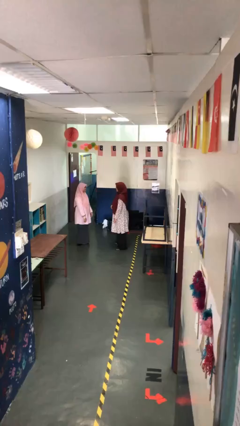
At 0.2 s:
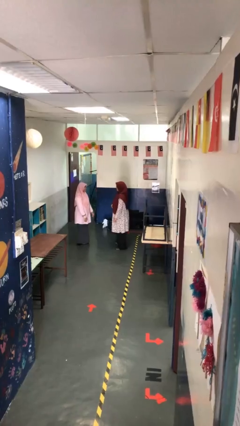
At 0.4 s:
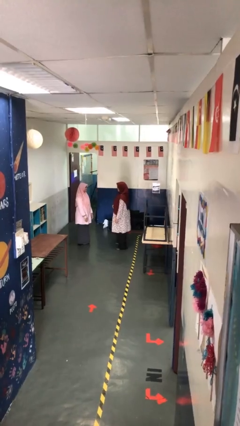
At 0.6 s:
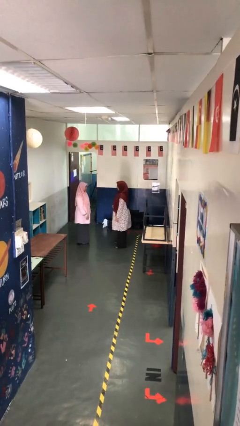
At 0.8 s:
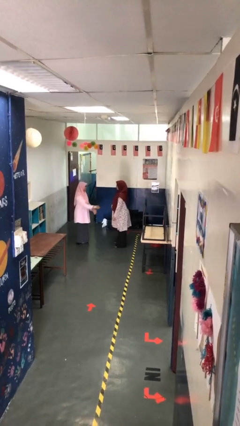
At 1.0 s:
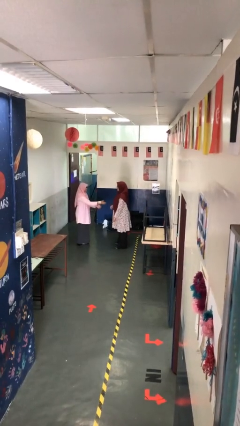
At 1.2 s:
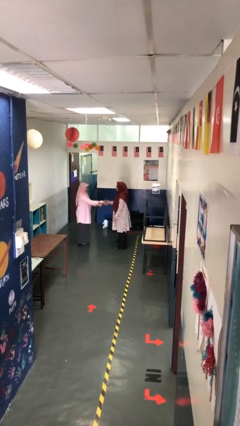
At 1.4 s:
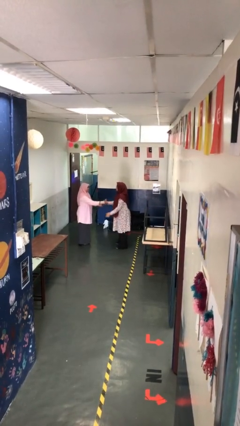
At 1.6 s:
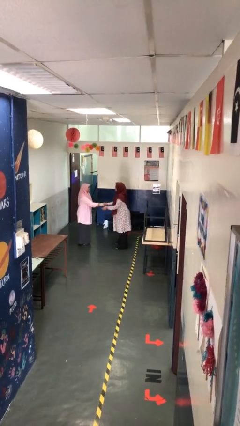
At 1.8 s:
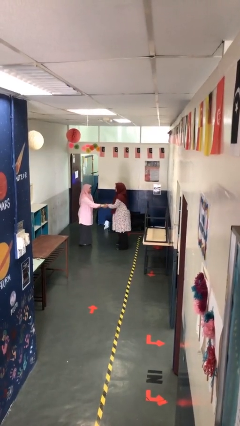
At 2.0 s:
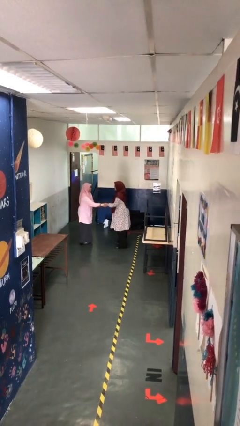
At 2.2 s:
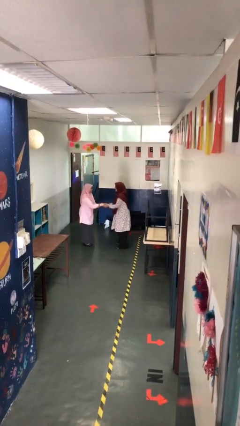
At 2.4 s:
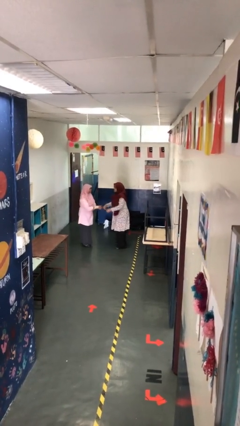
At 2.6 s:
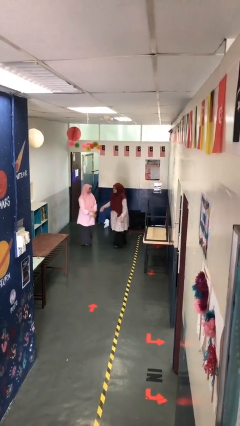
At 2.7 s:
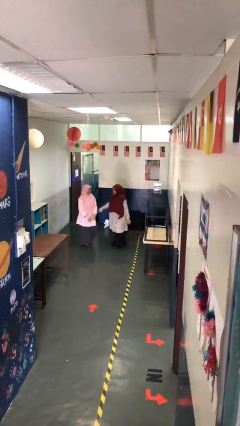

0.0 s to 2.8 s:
person shakes hand

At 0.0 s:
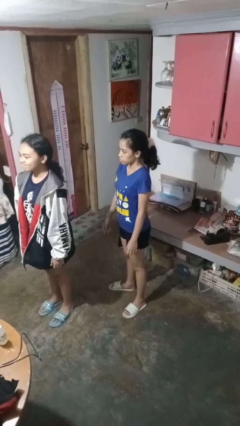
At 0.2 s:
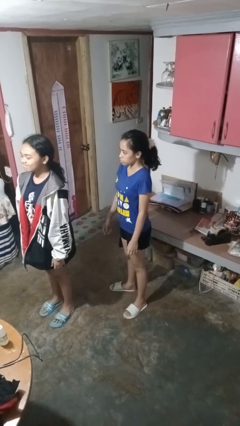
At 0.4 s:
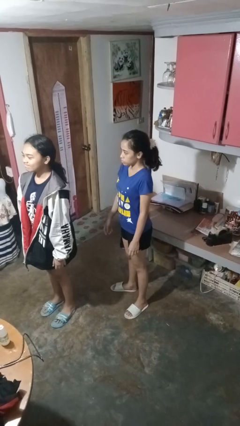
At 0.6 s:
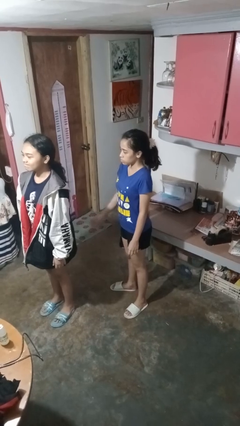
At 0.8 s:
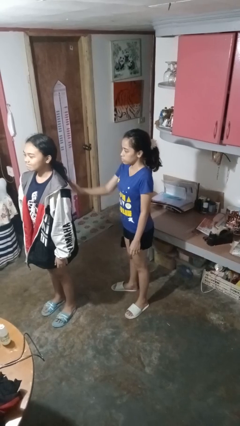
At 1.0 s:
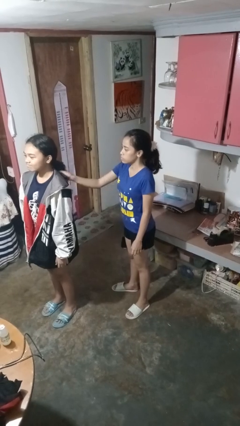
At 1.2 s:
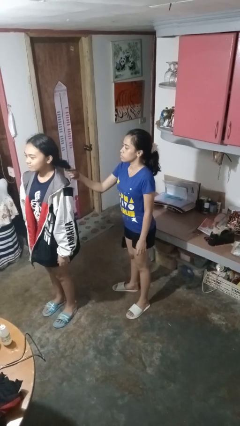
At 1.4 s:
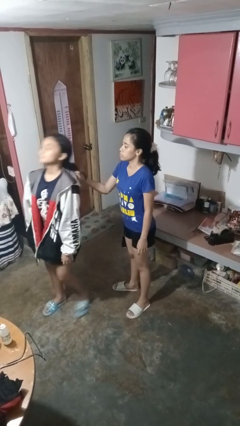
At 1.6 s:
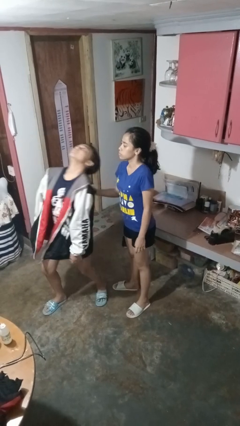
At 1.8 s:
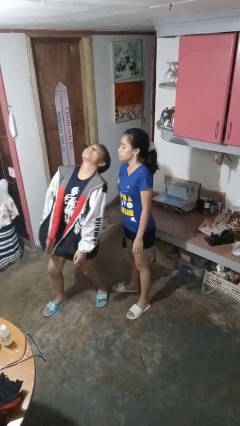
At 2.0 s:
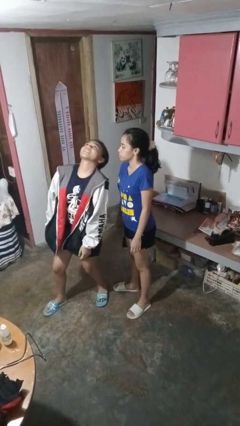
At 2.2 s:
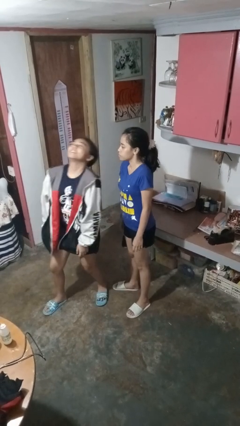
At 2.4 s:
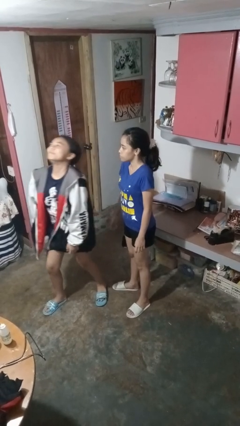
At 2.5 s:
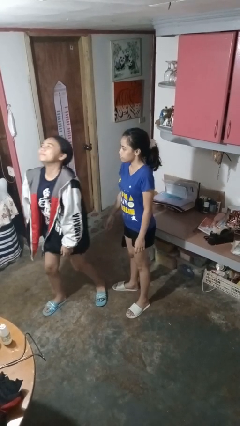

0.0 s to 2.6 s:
person grabs person by hair

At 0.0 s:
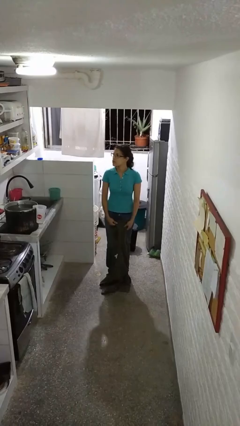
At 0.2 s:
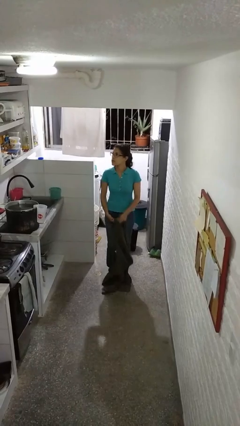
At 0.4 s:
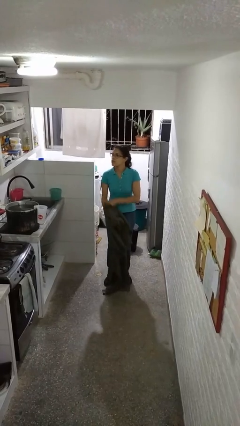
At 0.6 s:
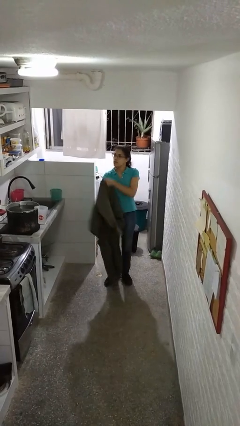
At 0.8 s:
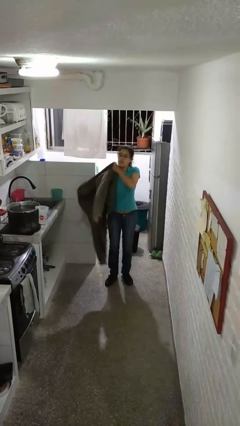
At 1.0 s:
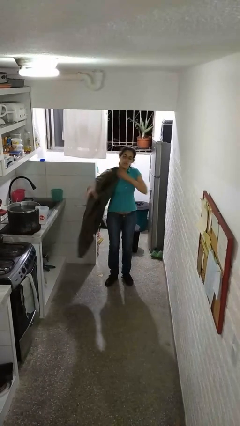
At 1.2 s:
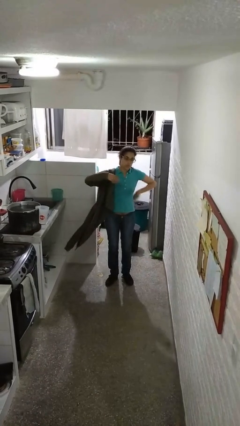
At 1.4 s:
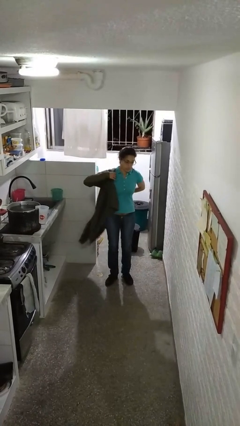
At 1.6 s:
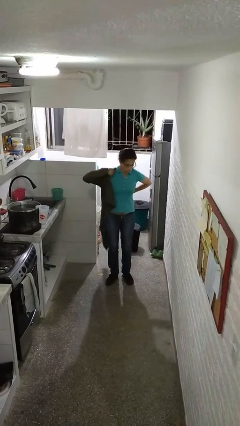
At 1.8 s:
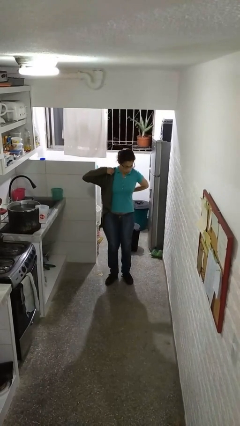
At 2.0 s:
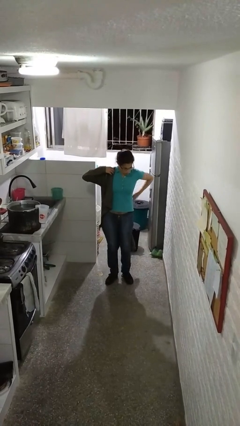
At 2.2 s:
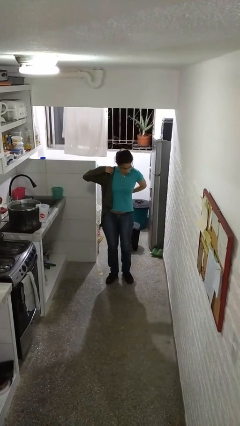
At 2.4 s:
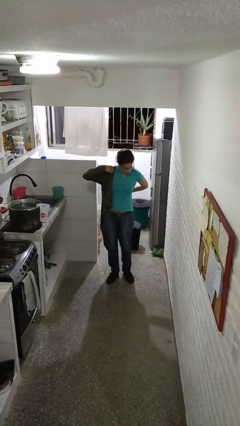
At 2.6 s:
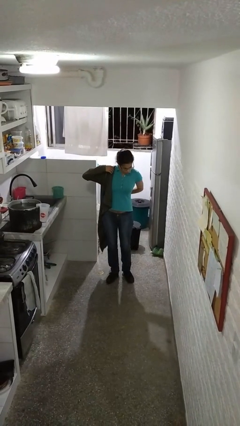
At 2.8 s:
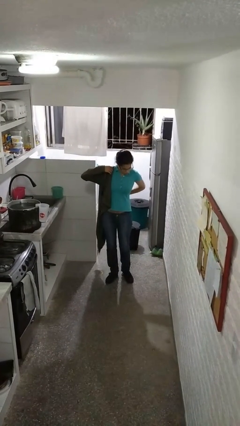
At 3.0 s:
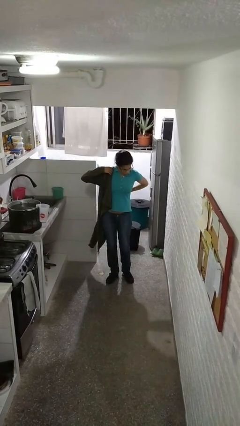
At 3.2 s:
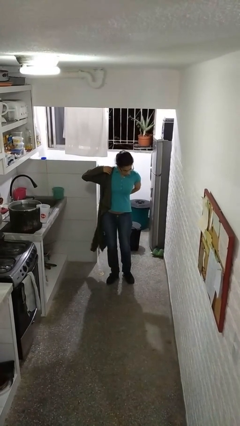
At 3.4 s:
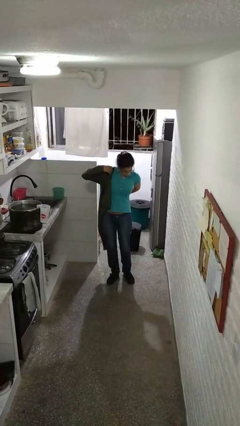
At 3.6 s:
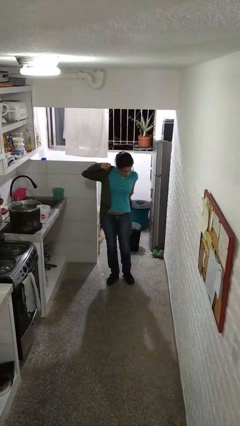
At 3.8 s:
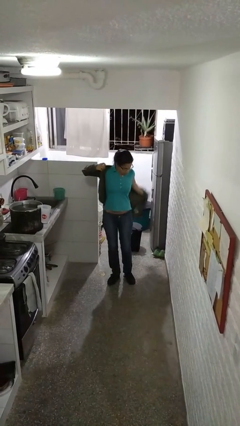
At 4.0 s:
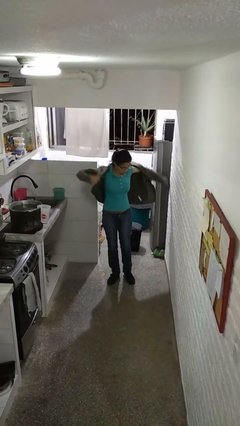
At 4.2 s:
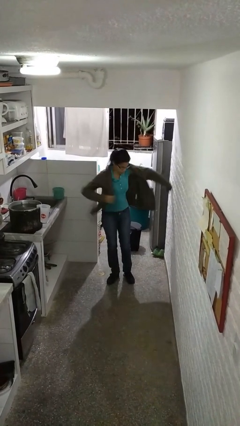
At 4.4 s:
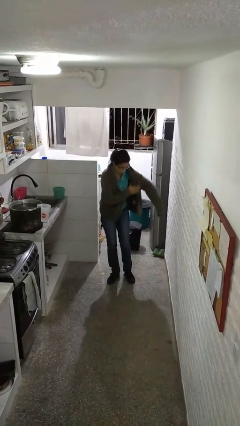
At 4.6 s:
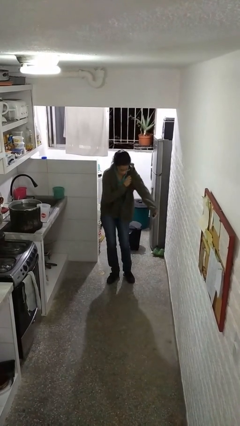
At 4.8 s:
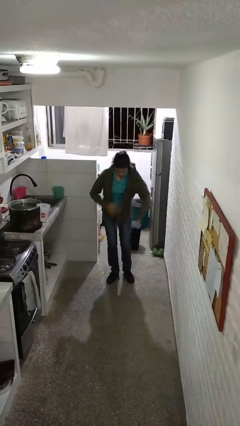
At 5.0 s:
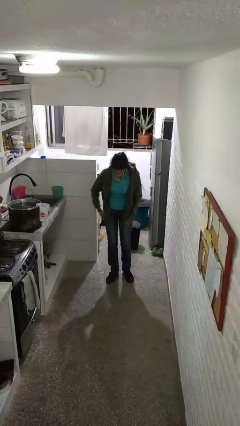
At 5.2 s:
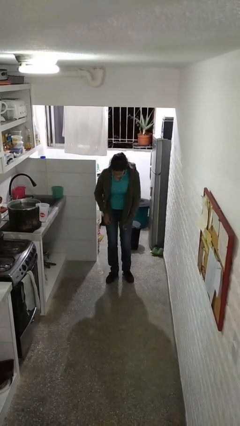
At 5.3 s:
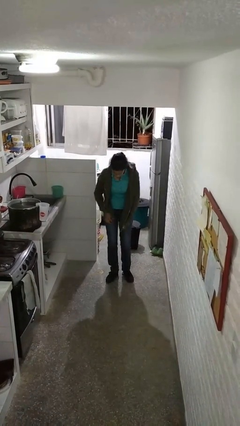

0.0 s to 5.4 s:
person puts on jacket

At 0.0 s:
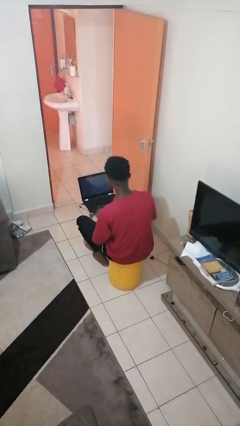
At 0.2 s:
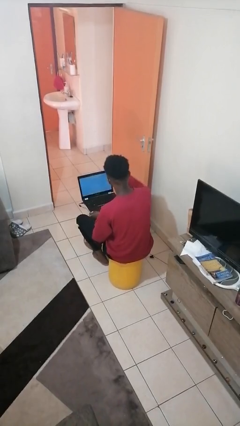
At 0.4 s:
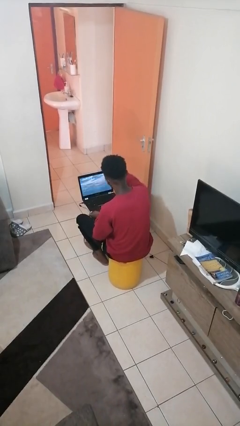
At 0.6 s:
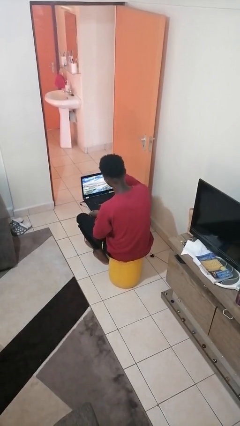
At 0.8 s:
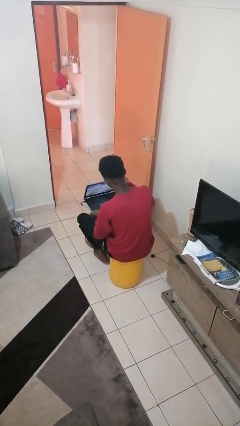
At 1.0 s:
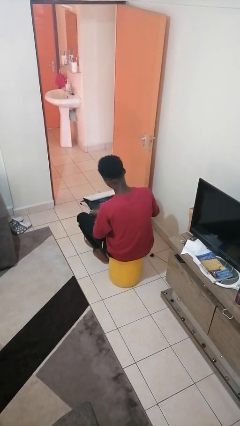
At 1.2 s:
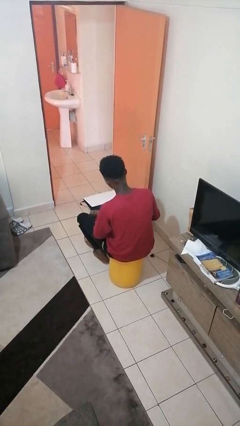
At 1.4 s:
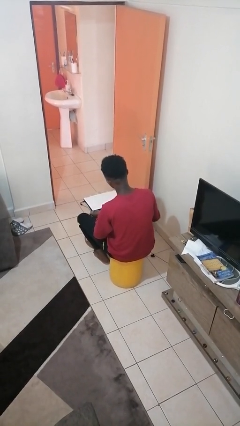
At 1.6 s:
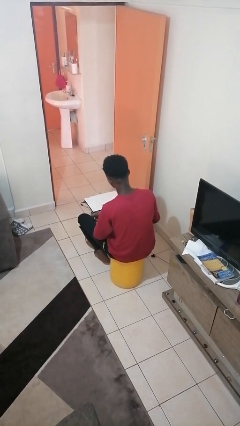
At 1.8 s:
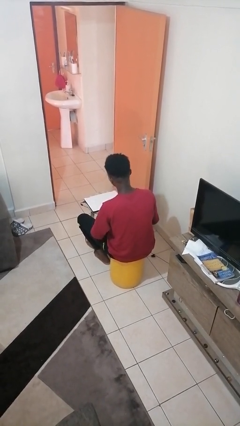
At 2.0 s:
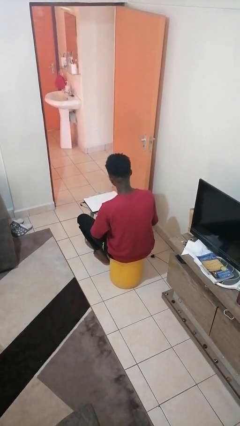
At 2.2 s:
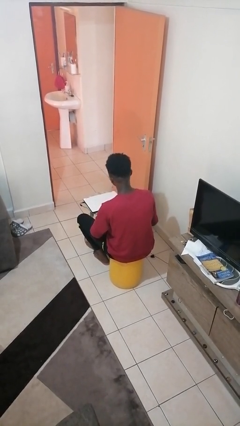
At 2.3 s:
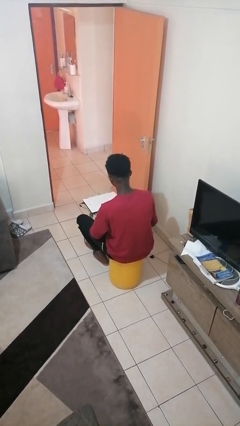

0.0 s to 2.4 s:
person closes laptop

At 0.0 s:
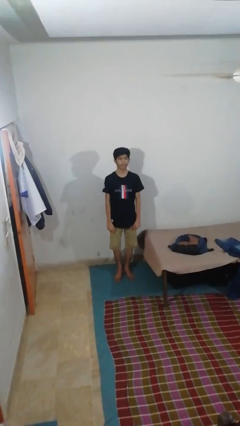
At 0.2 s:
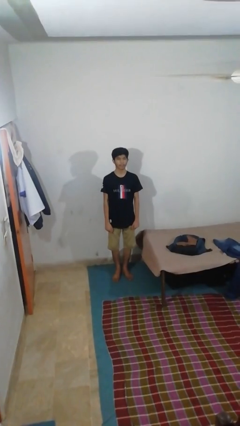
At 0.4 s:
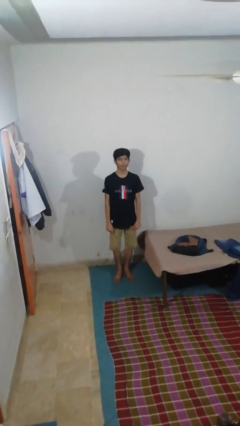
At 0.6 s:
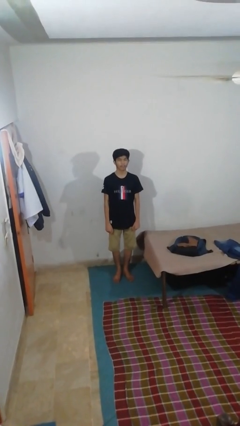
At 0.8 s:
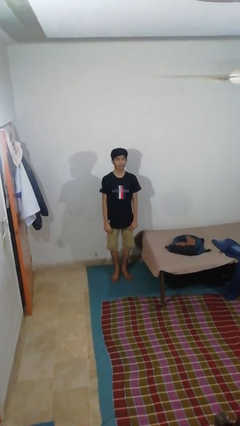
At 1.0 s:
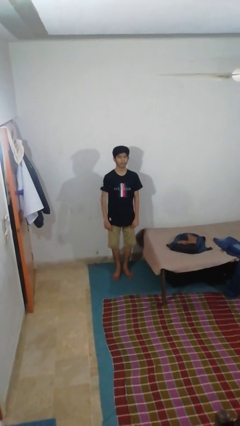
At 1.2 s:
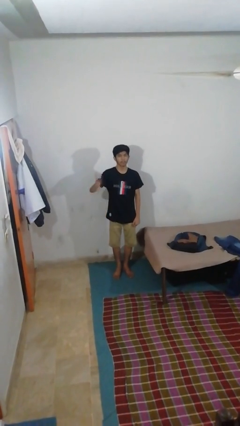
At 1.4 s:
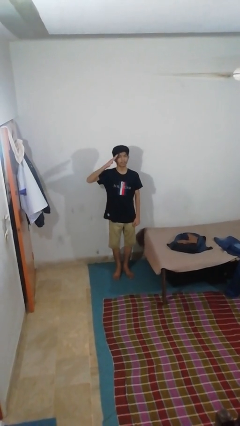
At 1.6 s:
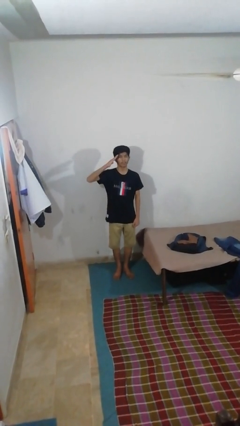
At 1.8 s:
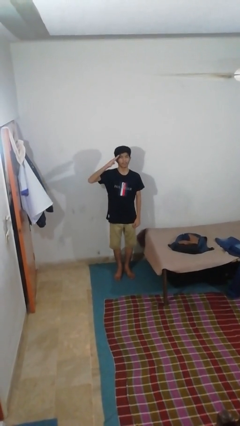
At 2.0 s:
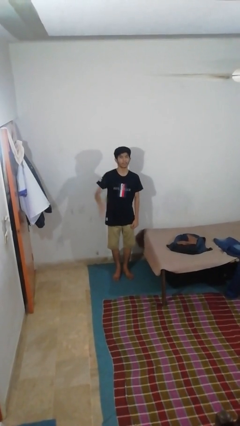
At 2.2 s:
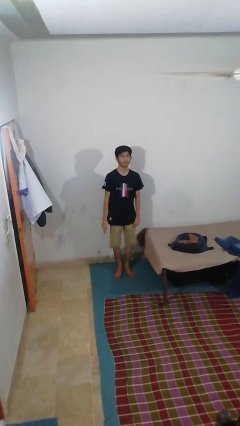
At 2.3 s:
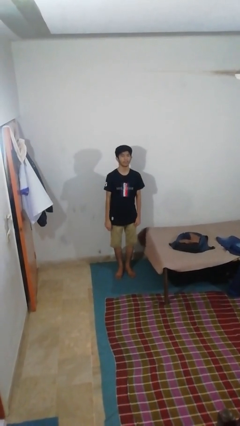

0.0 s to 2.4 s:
person salutes

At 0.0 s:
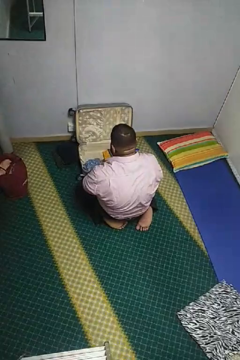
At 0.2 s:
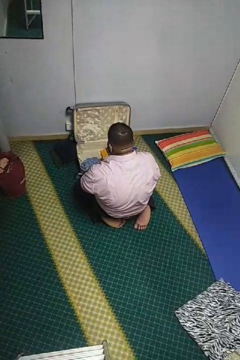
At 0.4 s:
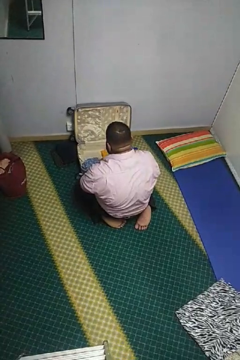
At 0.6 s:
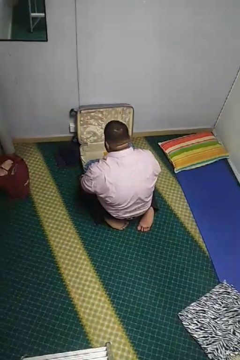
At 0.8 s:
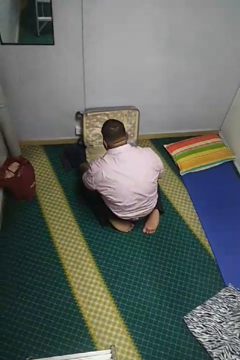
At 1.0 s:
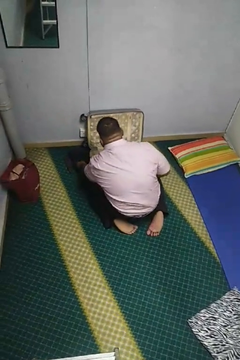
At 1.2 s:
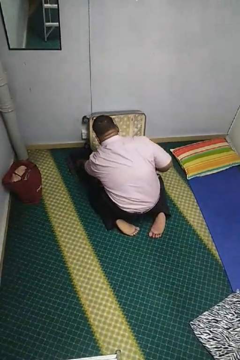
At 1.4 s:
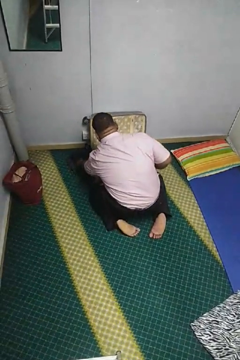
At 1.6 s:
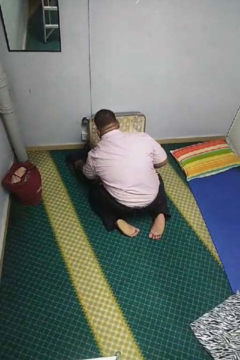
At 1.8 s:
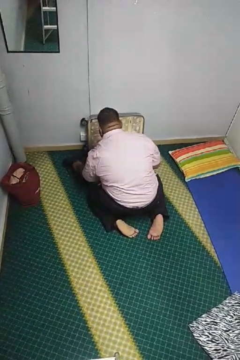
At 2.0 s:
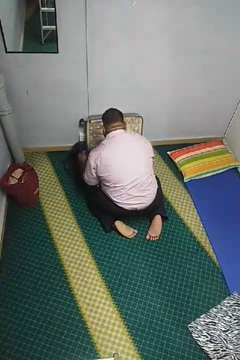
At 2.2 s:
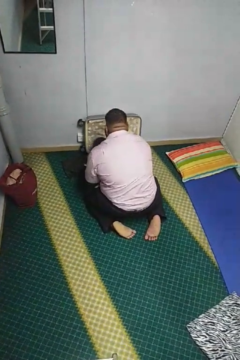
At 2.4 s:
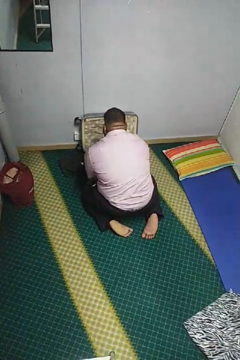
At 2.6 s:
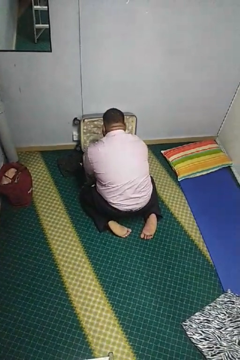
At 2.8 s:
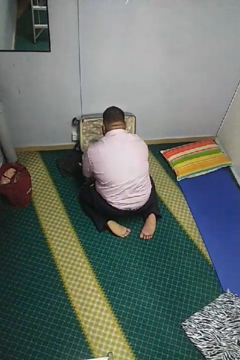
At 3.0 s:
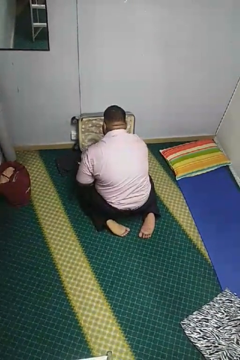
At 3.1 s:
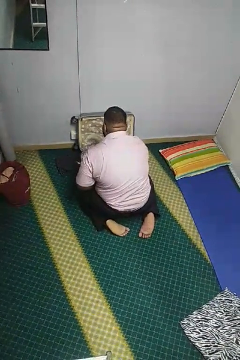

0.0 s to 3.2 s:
person loads clothes into suitcase
